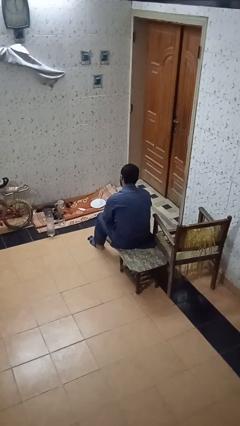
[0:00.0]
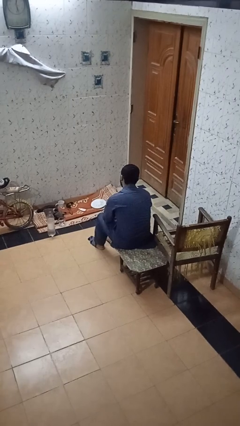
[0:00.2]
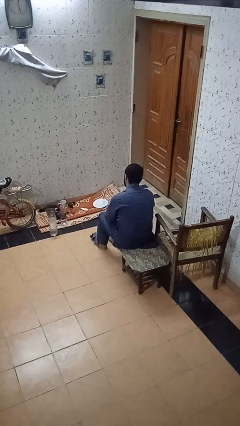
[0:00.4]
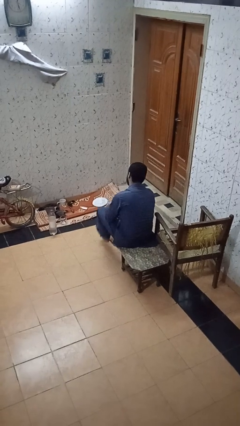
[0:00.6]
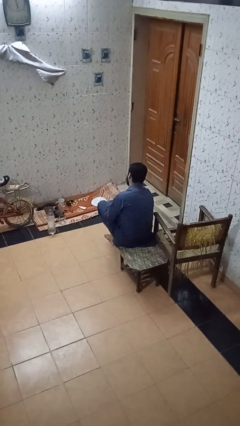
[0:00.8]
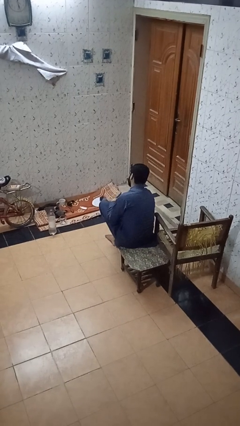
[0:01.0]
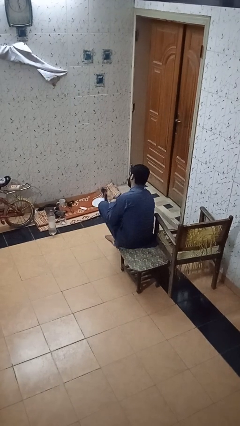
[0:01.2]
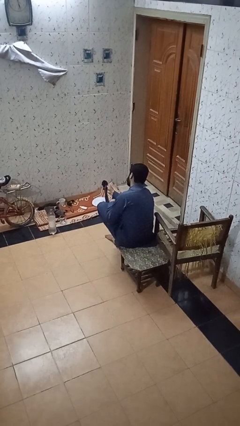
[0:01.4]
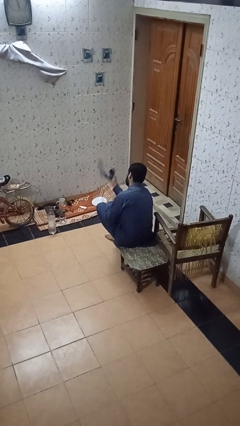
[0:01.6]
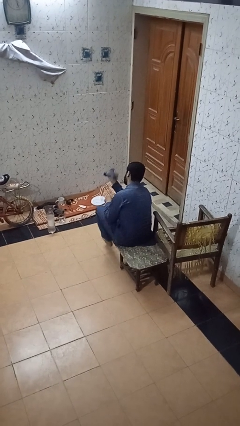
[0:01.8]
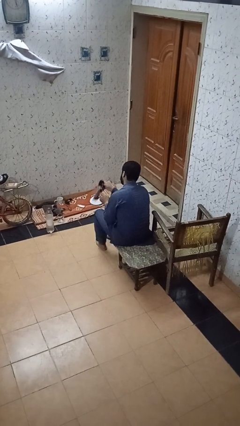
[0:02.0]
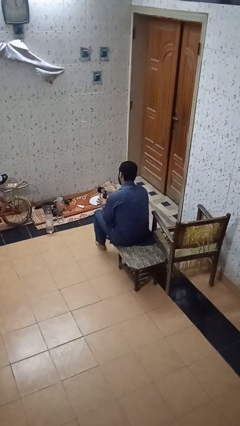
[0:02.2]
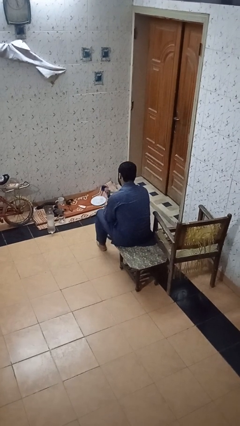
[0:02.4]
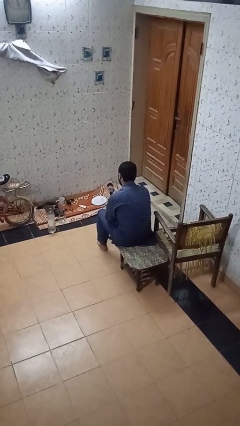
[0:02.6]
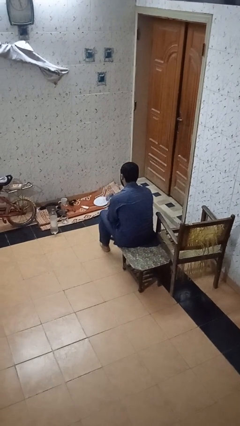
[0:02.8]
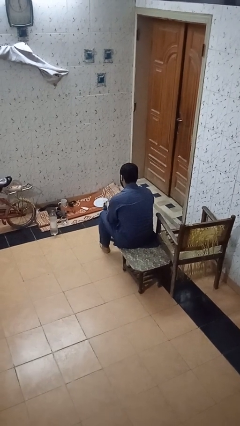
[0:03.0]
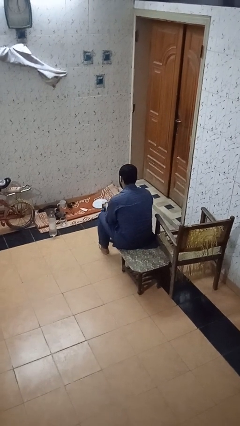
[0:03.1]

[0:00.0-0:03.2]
person takes off socks

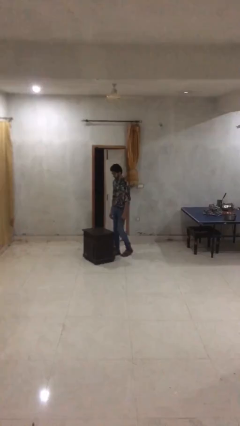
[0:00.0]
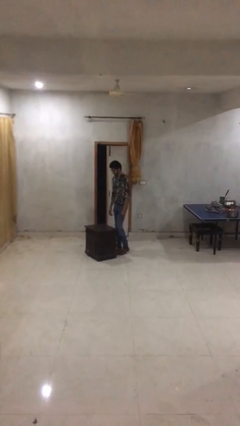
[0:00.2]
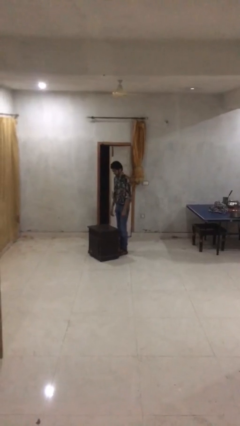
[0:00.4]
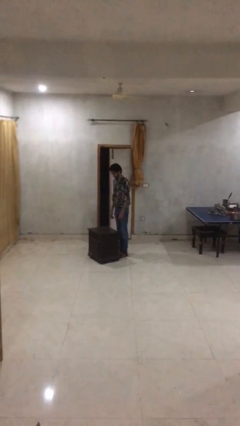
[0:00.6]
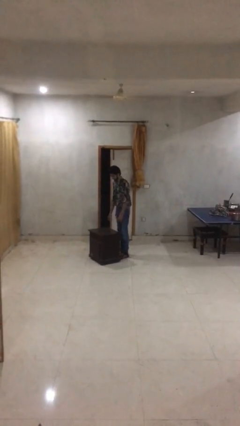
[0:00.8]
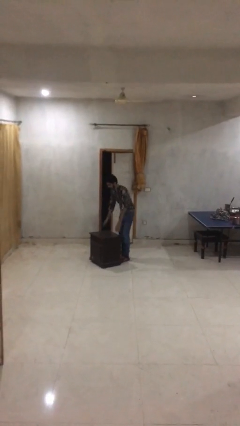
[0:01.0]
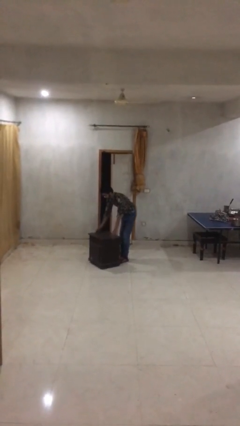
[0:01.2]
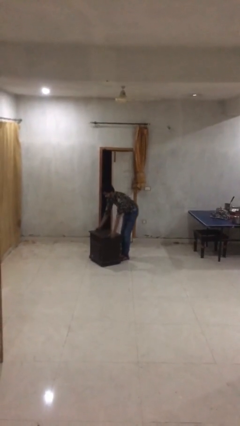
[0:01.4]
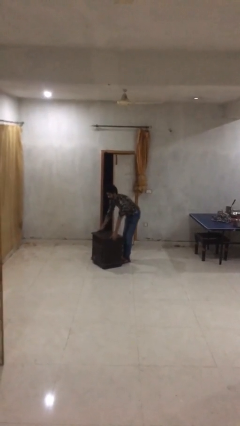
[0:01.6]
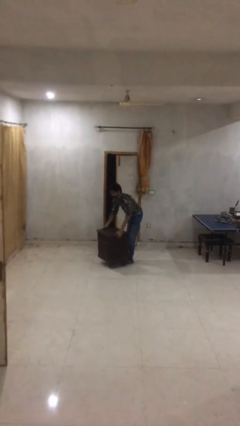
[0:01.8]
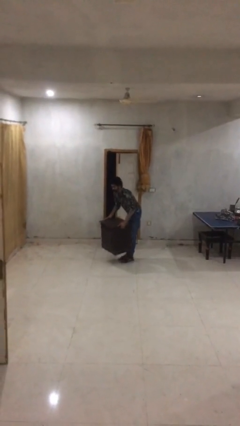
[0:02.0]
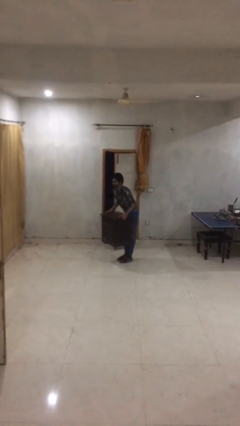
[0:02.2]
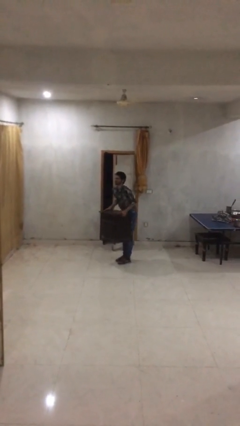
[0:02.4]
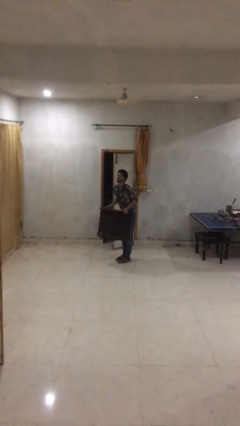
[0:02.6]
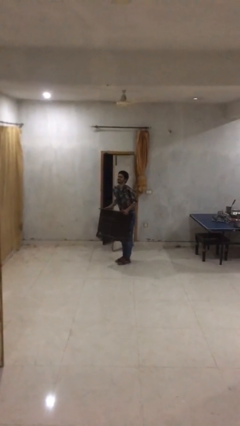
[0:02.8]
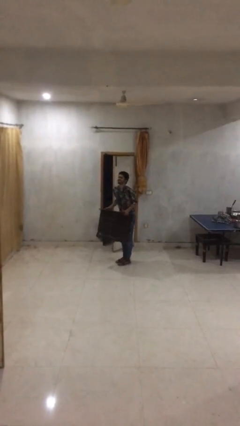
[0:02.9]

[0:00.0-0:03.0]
person picks up object from floor

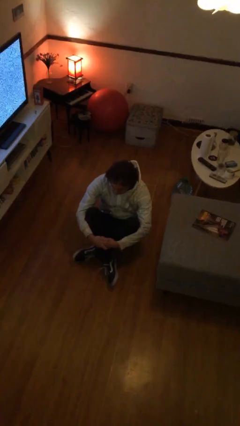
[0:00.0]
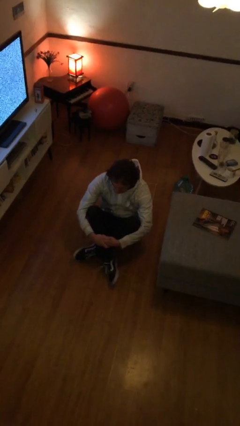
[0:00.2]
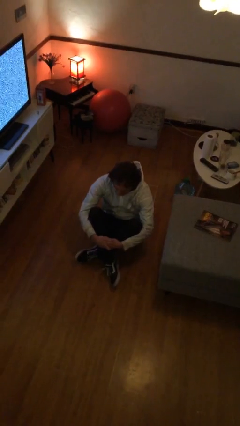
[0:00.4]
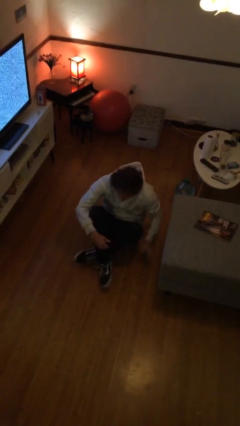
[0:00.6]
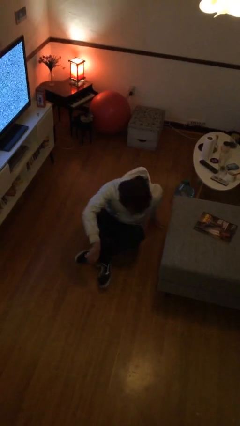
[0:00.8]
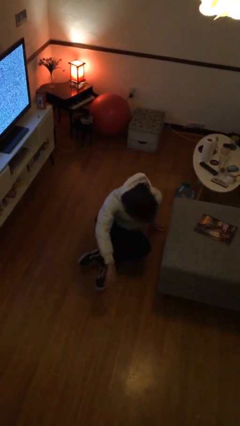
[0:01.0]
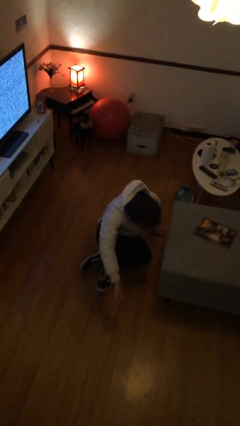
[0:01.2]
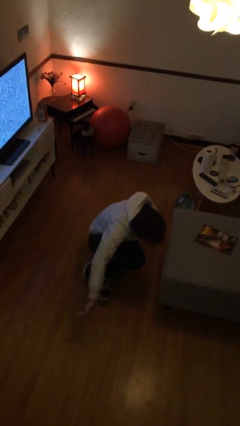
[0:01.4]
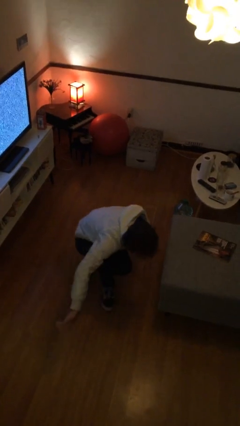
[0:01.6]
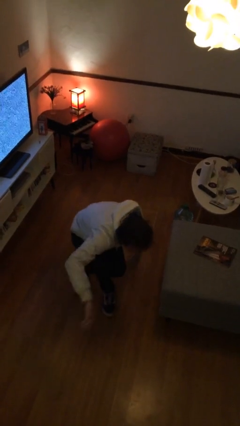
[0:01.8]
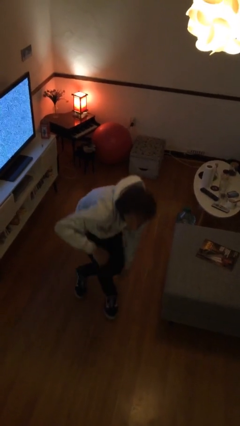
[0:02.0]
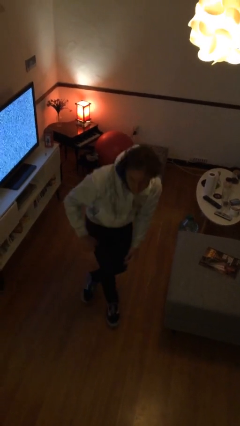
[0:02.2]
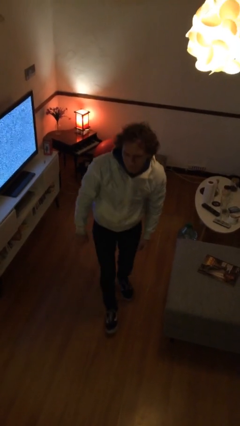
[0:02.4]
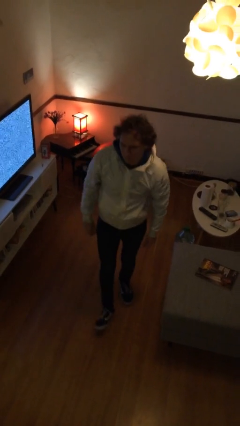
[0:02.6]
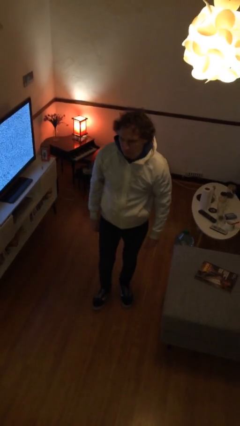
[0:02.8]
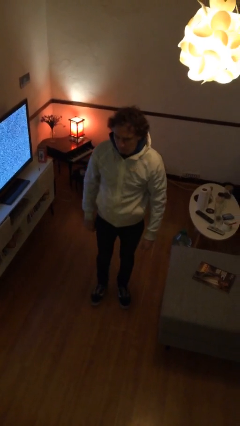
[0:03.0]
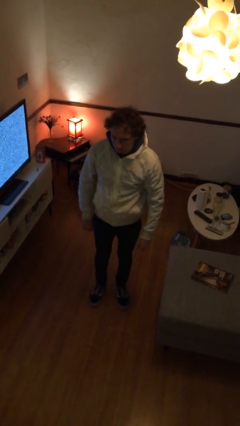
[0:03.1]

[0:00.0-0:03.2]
person stands up from floor

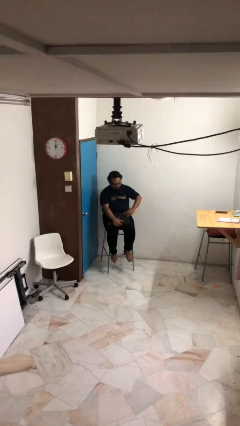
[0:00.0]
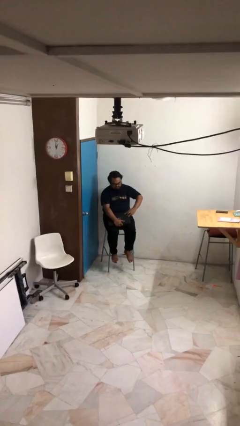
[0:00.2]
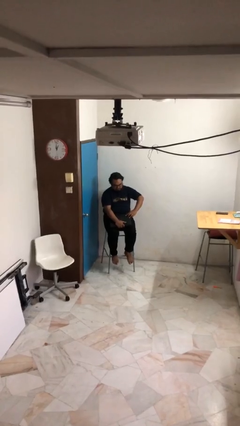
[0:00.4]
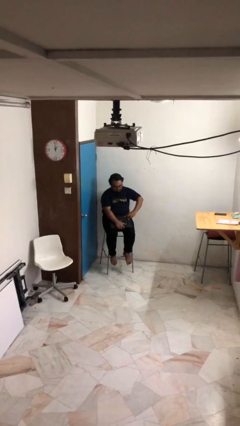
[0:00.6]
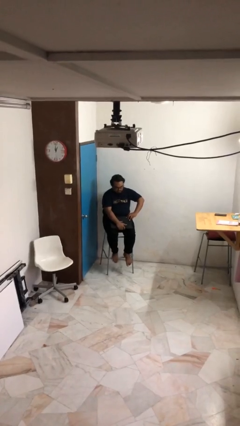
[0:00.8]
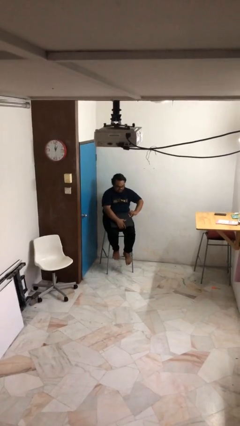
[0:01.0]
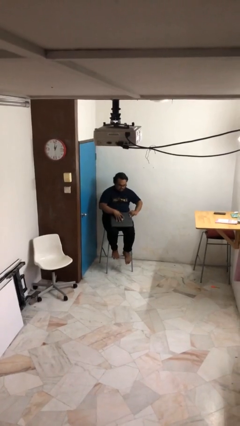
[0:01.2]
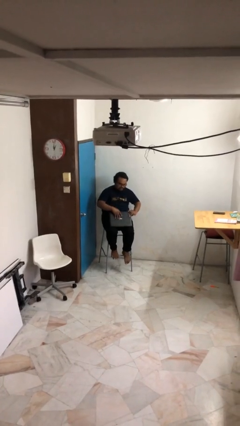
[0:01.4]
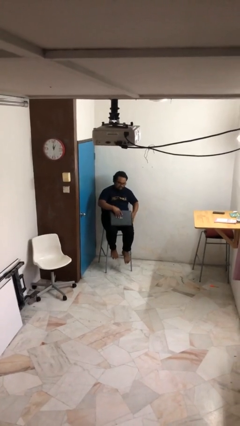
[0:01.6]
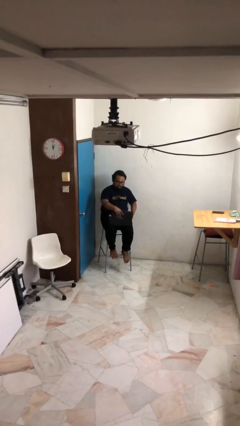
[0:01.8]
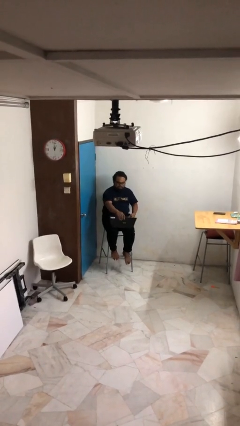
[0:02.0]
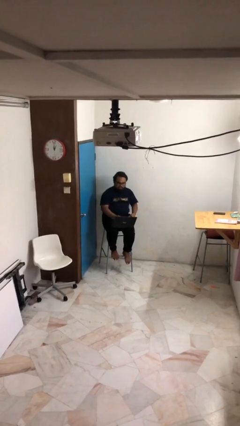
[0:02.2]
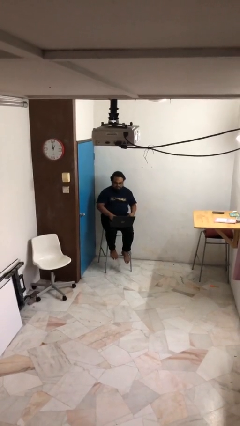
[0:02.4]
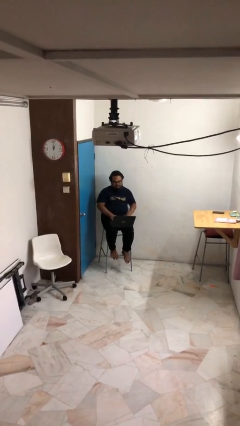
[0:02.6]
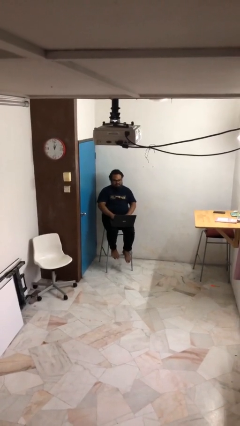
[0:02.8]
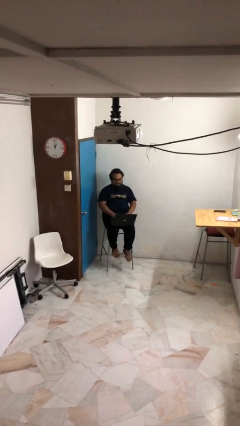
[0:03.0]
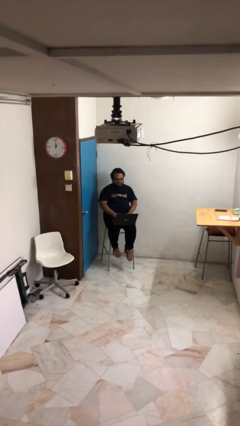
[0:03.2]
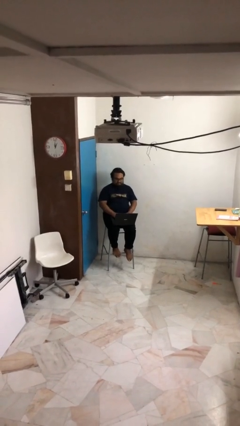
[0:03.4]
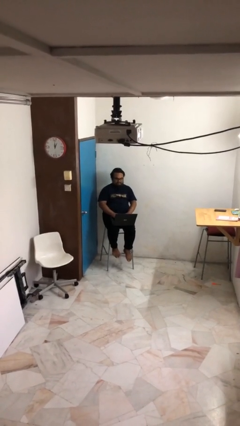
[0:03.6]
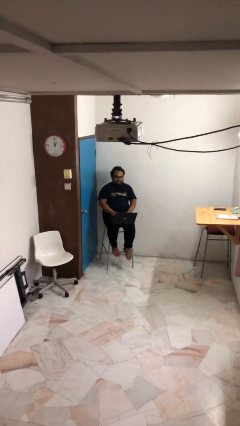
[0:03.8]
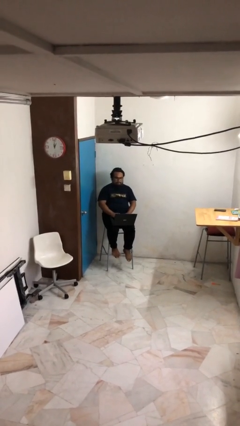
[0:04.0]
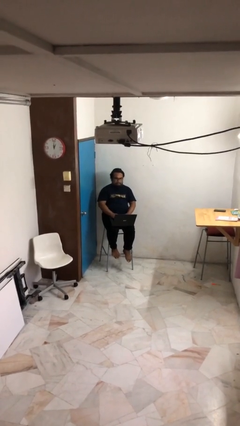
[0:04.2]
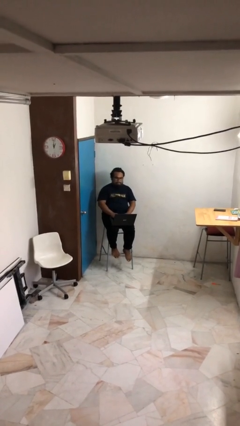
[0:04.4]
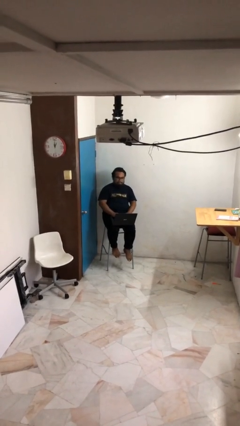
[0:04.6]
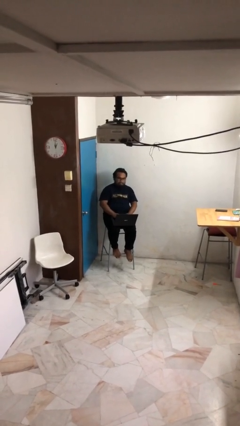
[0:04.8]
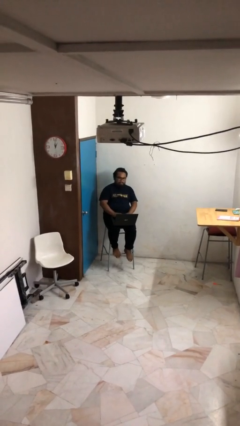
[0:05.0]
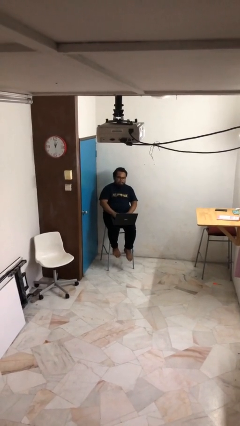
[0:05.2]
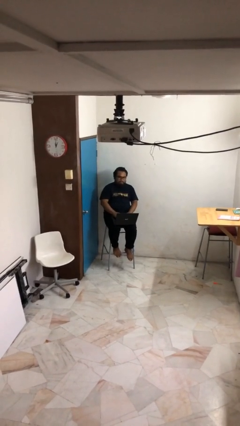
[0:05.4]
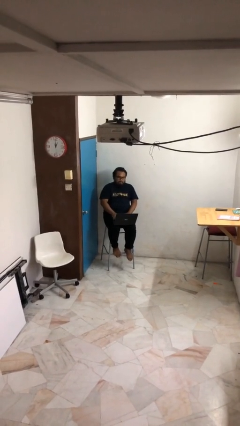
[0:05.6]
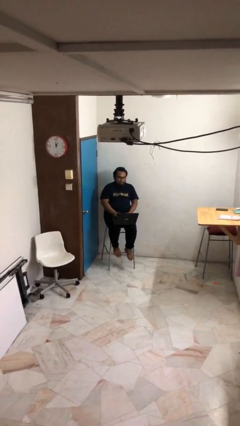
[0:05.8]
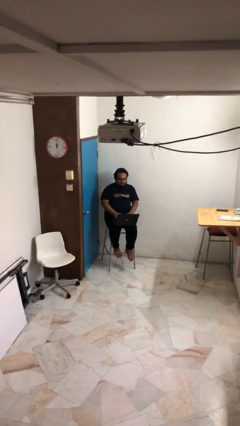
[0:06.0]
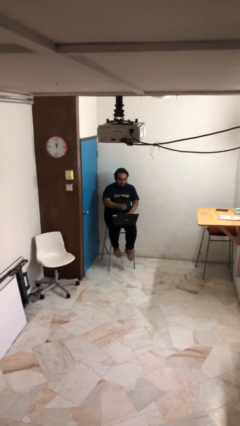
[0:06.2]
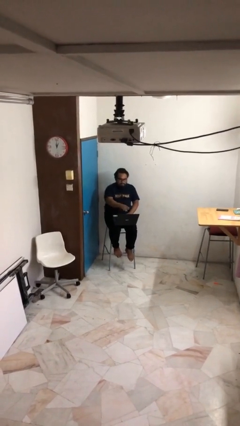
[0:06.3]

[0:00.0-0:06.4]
person interacts with laptop

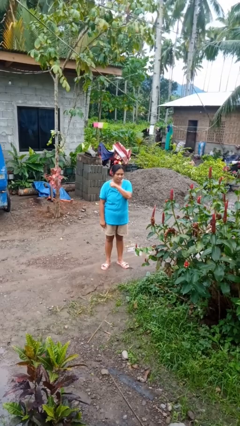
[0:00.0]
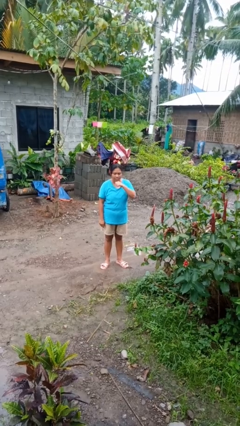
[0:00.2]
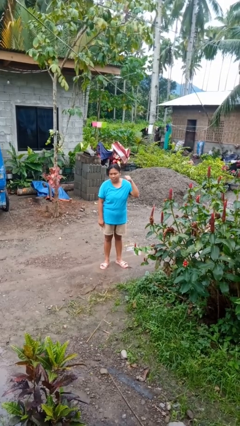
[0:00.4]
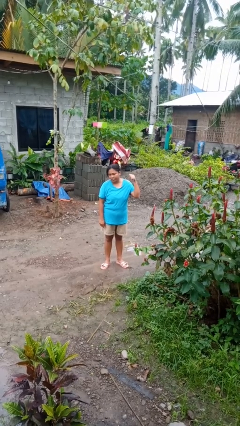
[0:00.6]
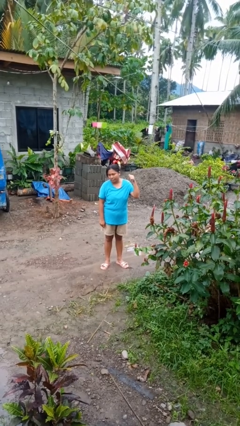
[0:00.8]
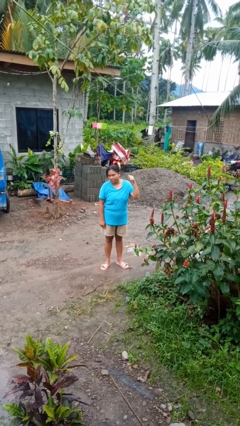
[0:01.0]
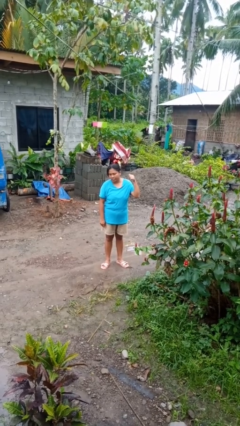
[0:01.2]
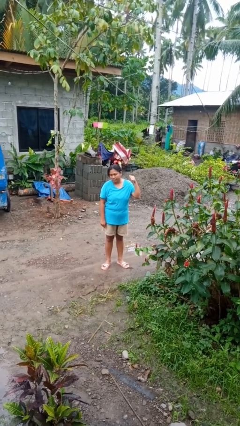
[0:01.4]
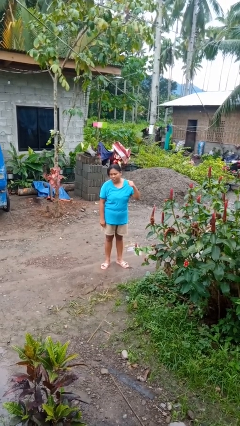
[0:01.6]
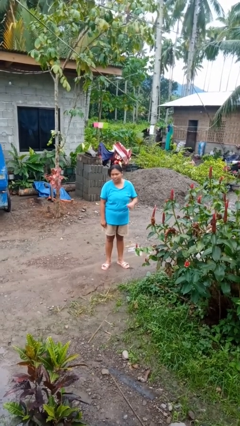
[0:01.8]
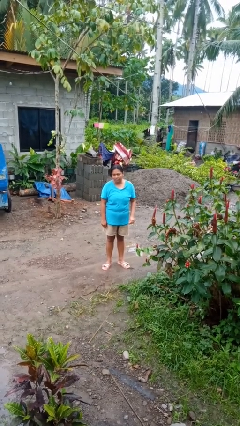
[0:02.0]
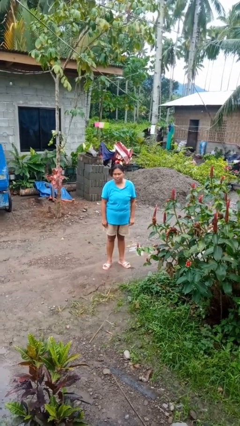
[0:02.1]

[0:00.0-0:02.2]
person gestures cut
